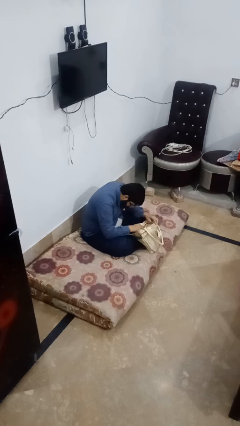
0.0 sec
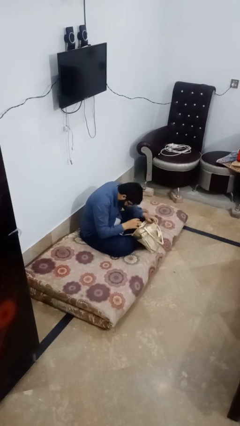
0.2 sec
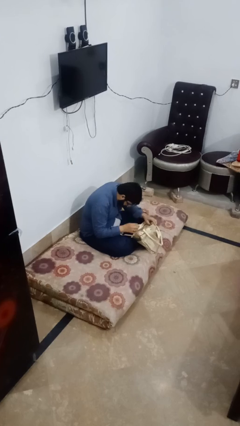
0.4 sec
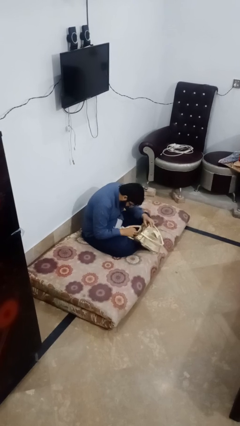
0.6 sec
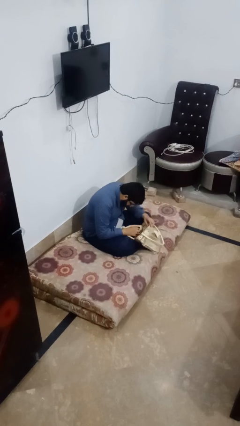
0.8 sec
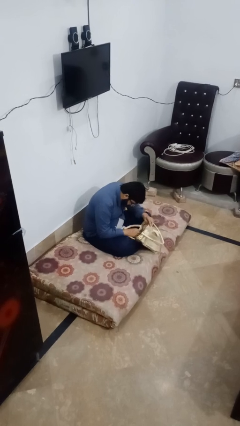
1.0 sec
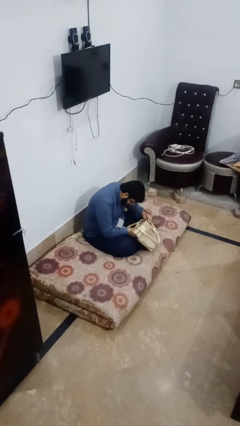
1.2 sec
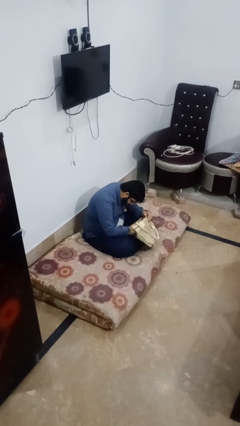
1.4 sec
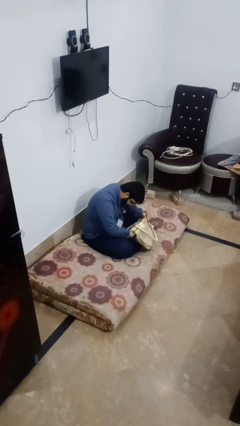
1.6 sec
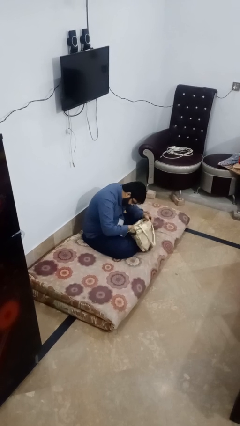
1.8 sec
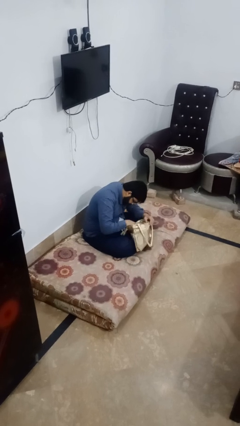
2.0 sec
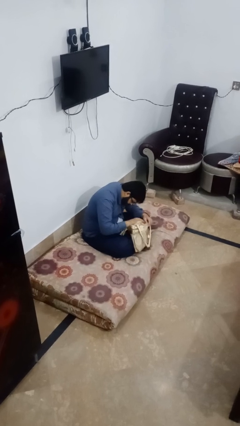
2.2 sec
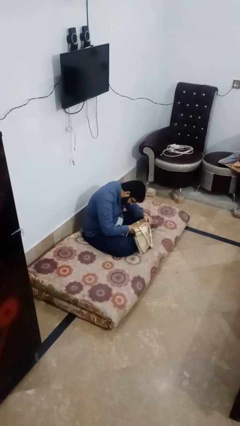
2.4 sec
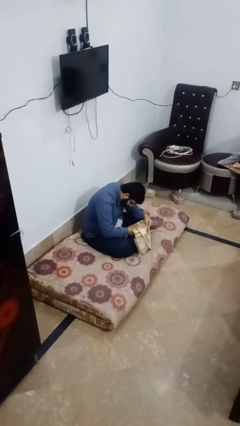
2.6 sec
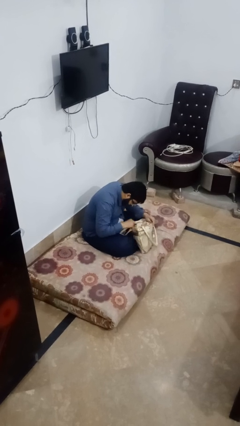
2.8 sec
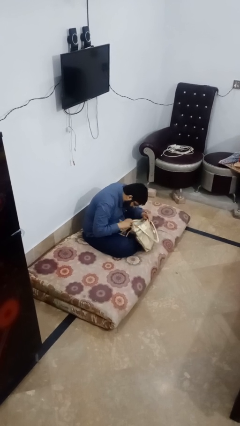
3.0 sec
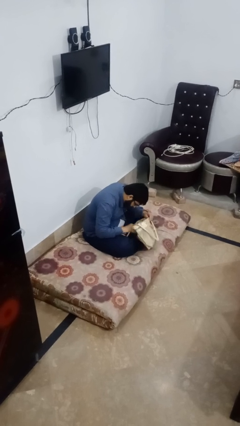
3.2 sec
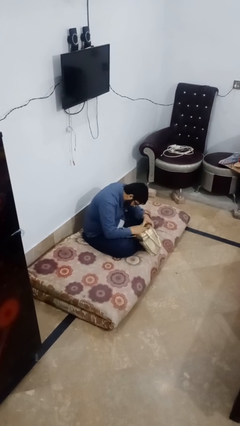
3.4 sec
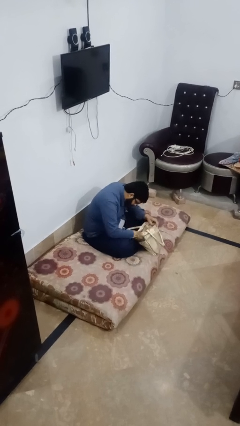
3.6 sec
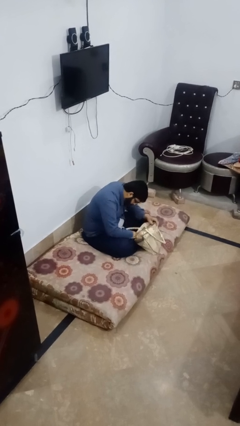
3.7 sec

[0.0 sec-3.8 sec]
person searches in bag

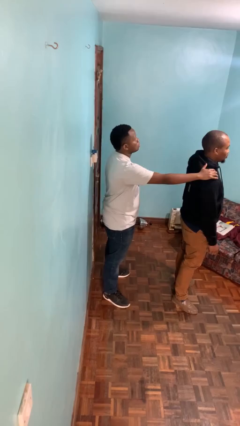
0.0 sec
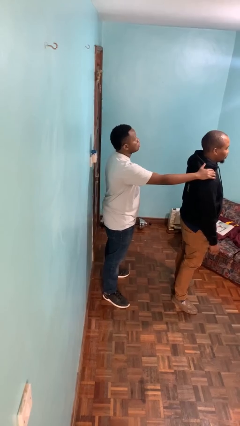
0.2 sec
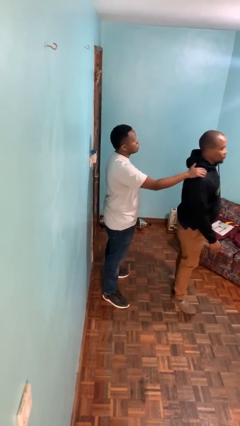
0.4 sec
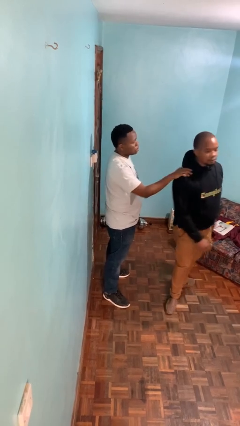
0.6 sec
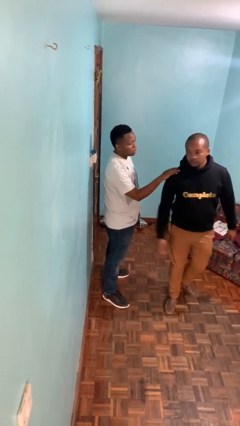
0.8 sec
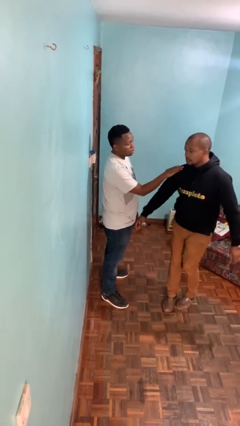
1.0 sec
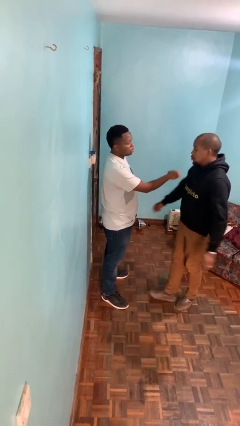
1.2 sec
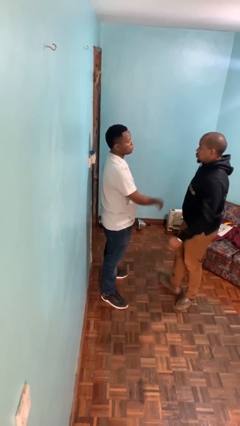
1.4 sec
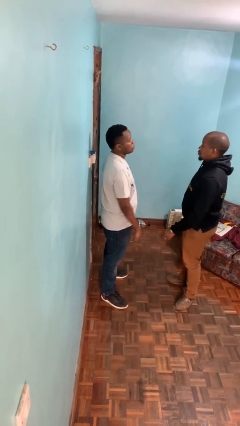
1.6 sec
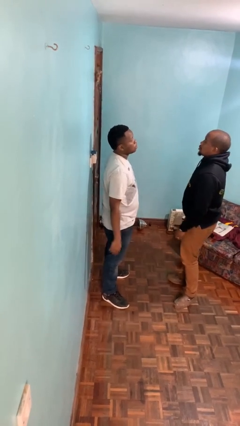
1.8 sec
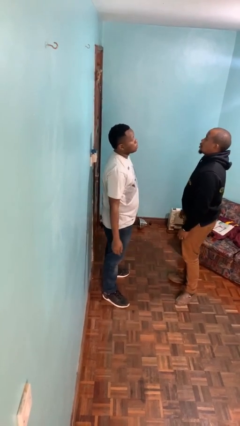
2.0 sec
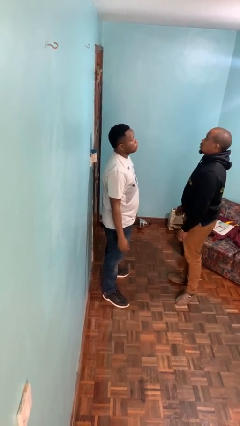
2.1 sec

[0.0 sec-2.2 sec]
person spins person around

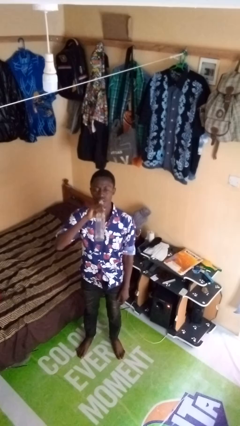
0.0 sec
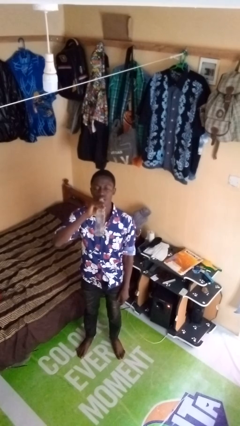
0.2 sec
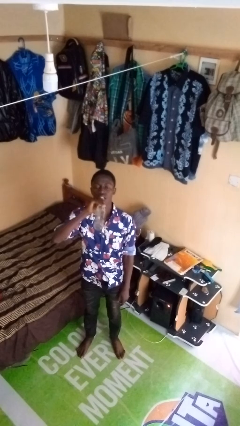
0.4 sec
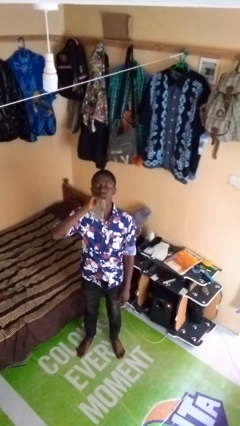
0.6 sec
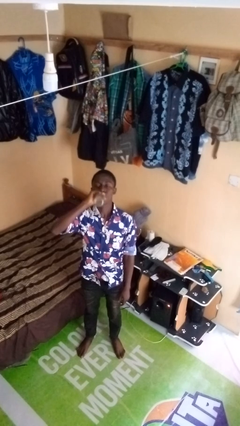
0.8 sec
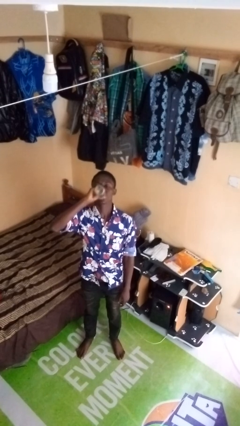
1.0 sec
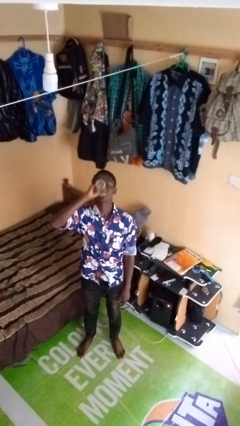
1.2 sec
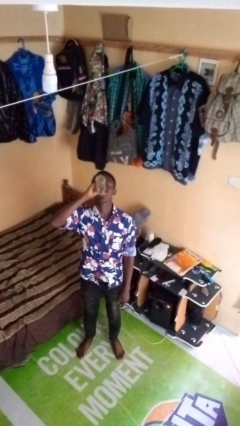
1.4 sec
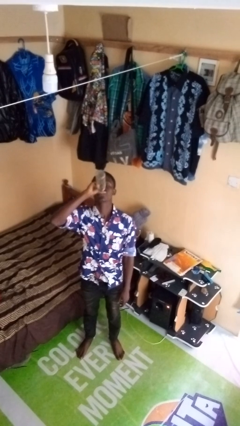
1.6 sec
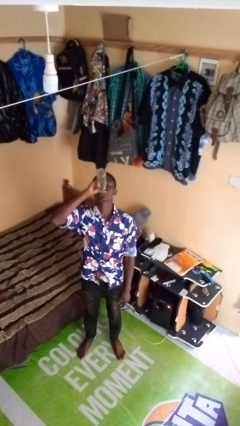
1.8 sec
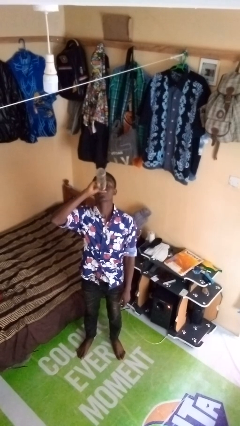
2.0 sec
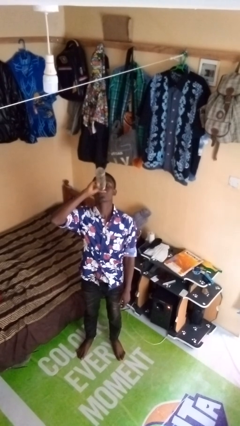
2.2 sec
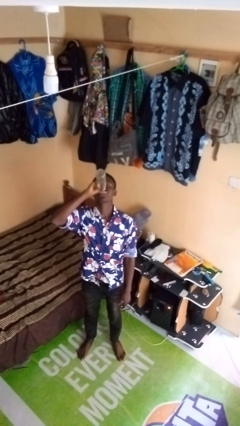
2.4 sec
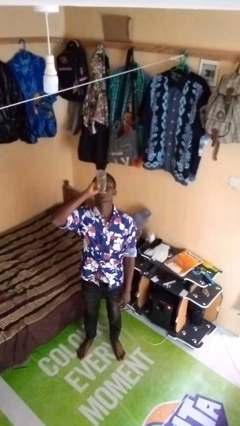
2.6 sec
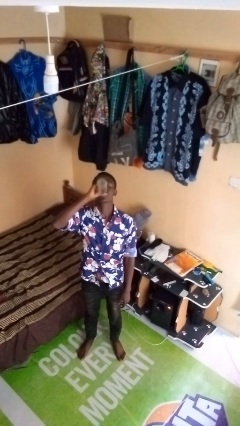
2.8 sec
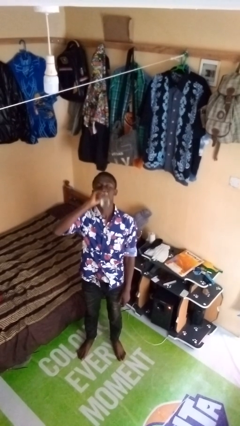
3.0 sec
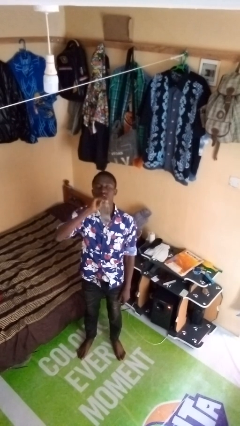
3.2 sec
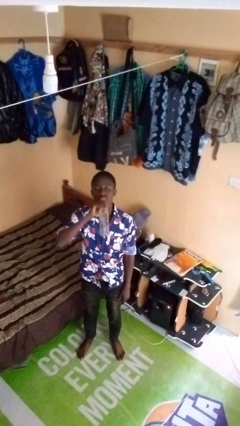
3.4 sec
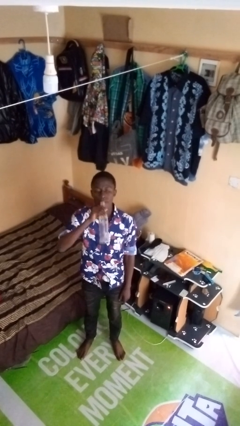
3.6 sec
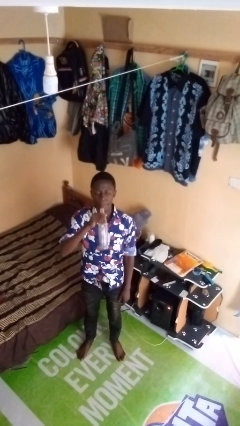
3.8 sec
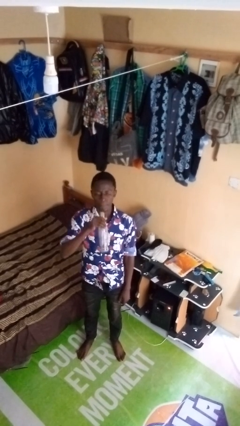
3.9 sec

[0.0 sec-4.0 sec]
person drinks from bottle

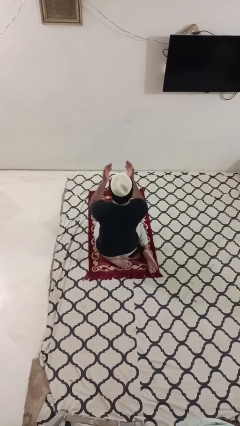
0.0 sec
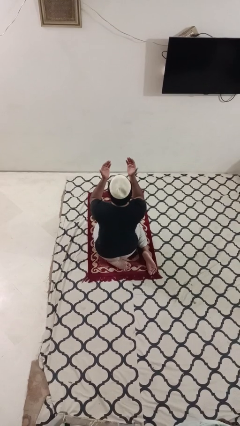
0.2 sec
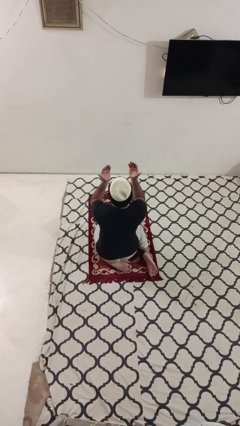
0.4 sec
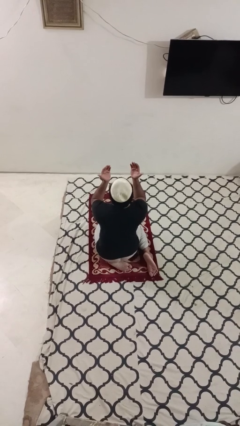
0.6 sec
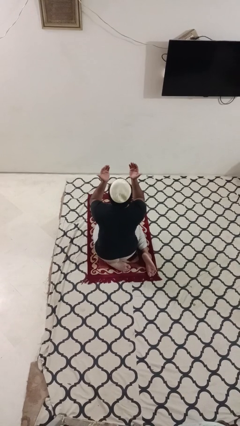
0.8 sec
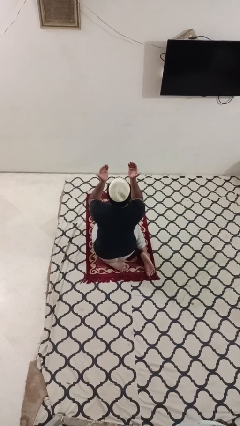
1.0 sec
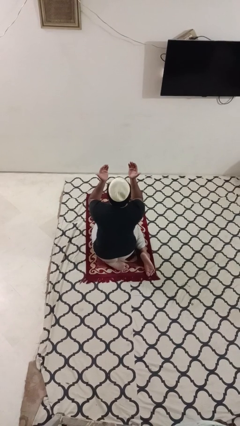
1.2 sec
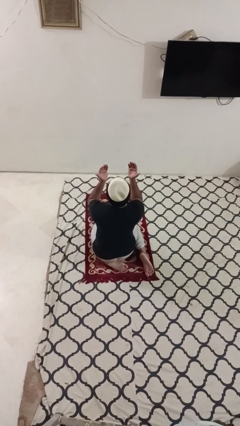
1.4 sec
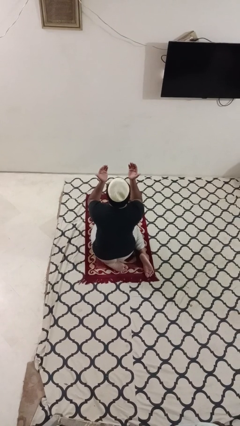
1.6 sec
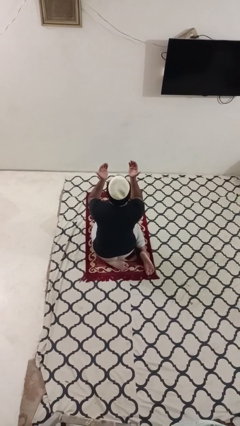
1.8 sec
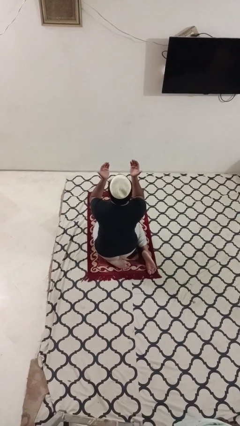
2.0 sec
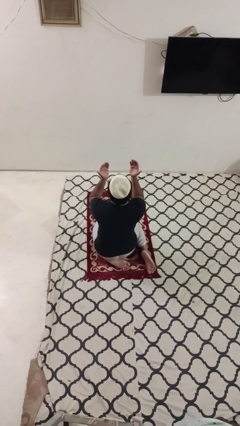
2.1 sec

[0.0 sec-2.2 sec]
person prays

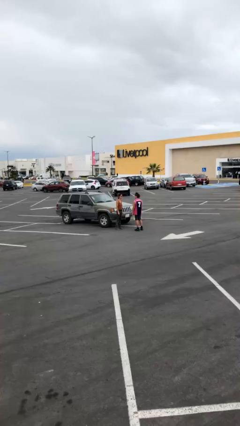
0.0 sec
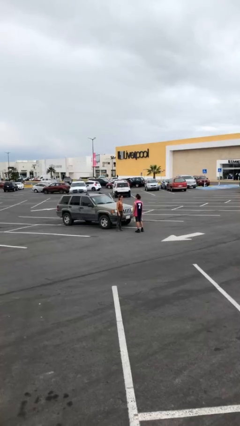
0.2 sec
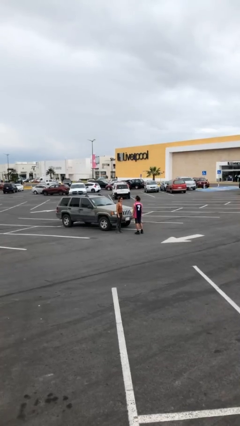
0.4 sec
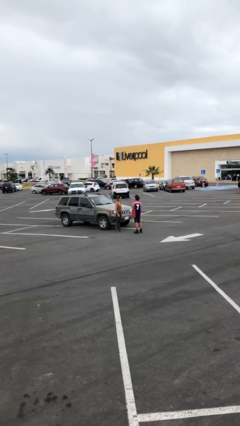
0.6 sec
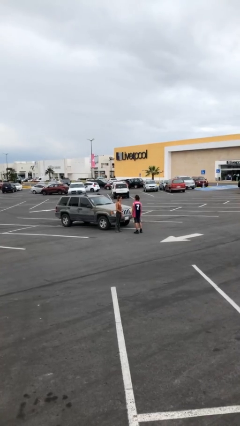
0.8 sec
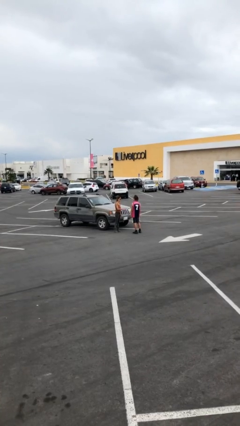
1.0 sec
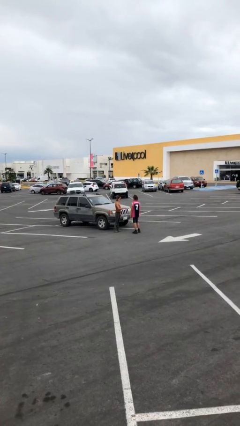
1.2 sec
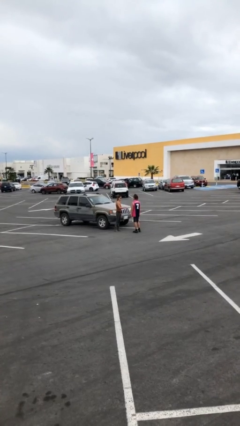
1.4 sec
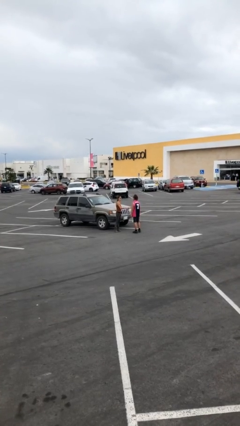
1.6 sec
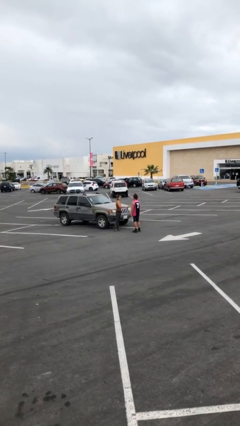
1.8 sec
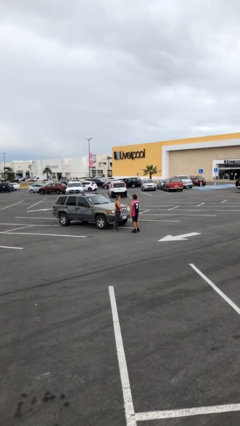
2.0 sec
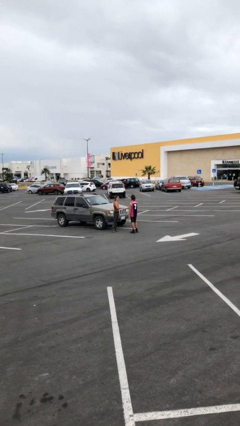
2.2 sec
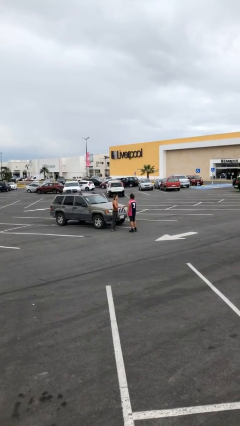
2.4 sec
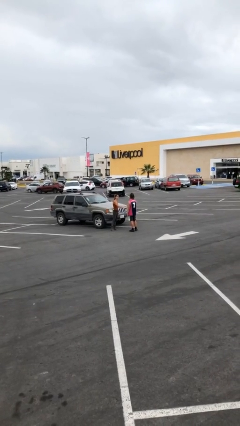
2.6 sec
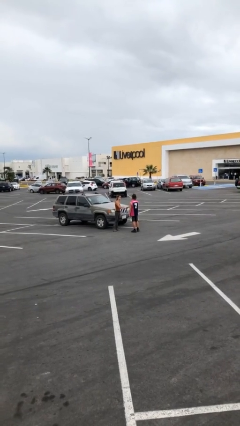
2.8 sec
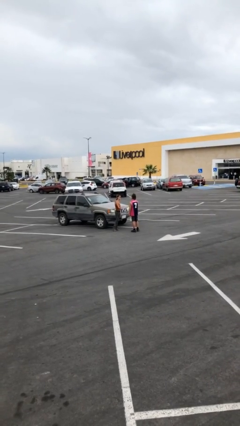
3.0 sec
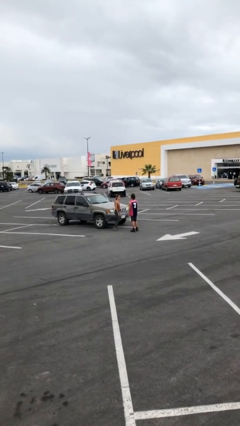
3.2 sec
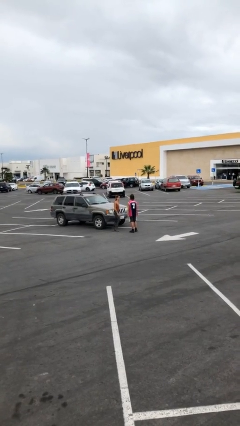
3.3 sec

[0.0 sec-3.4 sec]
person shakes hand

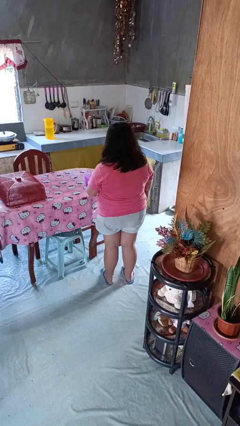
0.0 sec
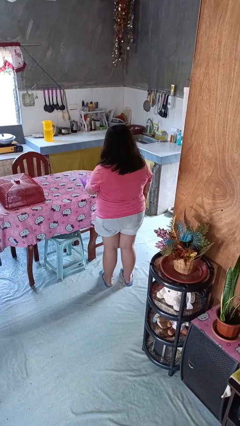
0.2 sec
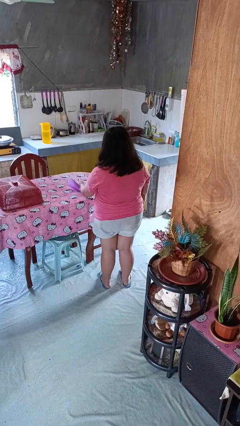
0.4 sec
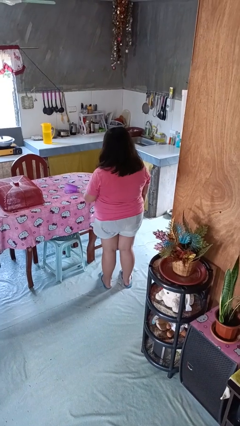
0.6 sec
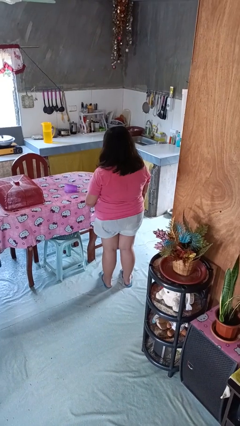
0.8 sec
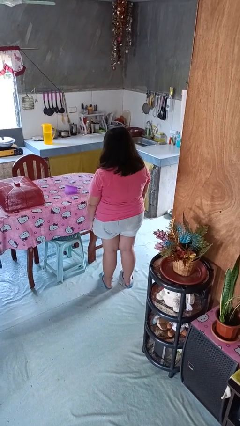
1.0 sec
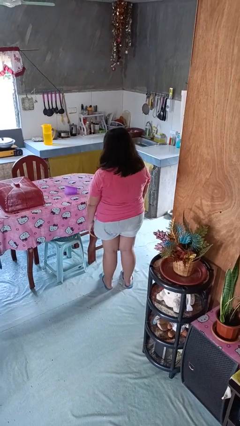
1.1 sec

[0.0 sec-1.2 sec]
person spills on table

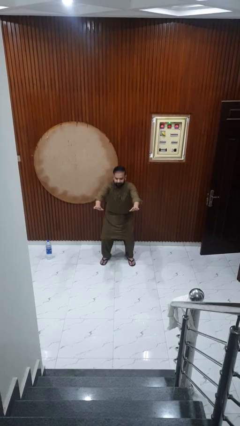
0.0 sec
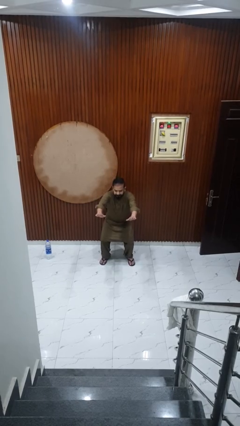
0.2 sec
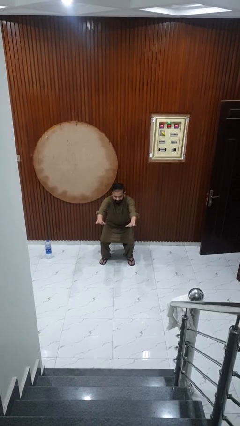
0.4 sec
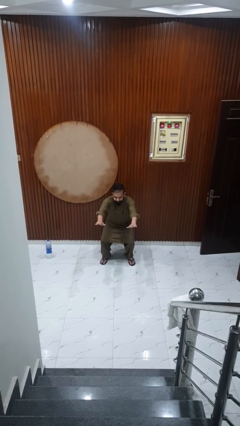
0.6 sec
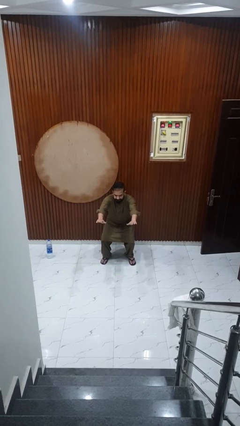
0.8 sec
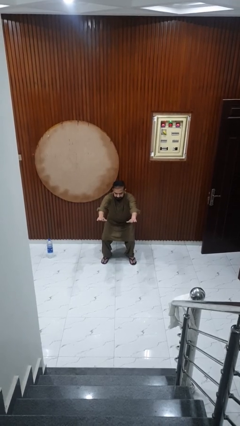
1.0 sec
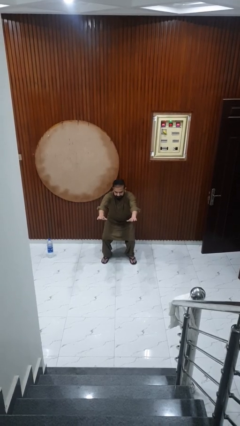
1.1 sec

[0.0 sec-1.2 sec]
person squats
